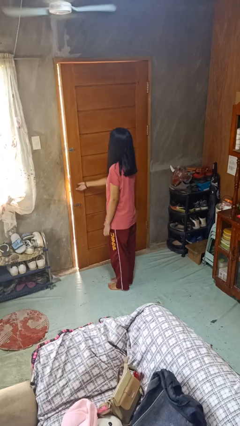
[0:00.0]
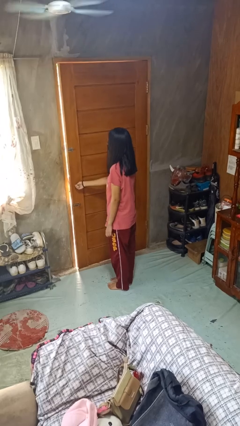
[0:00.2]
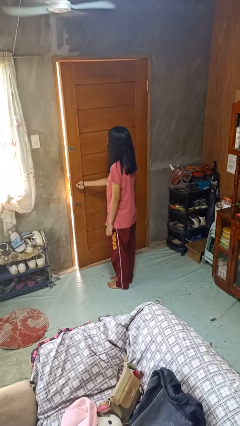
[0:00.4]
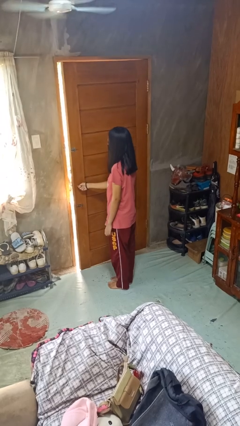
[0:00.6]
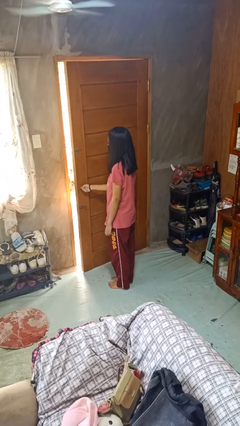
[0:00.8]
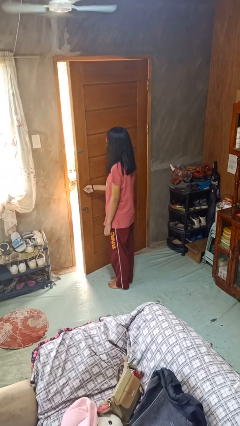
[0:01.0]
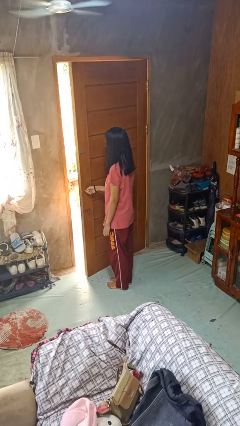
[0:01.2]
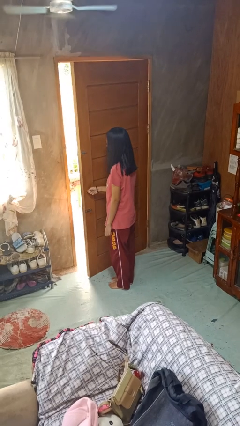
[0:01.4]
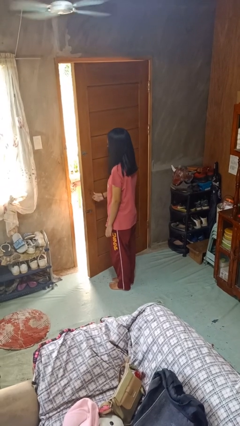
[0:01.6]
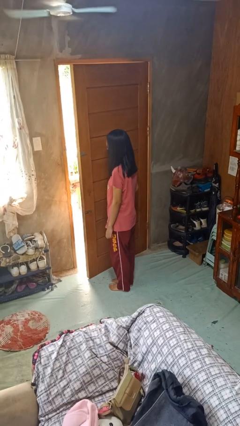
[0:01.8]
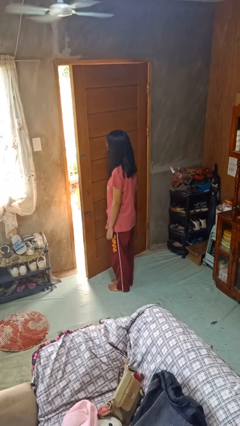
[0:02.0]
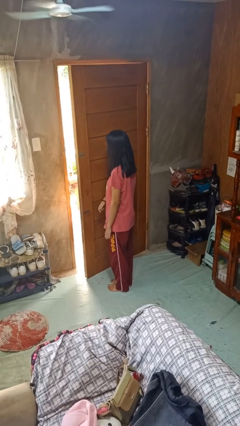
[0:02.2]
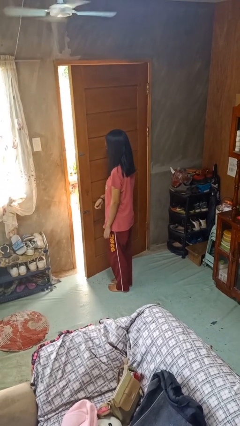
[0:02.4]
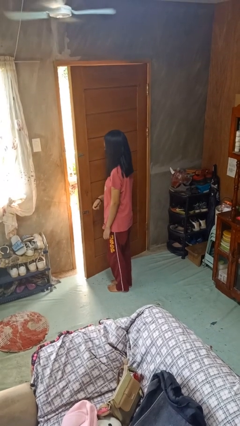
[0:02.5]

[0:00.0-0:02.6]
person opens facility door

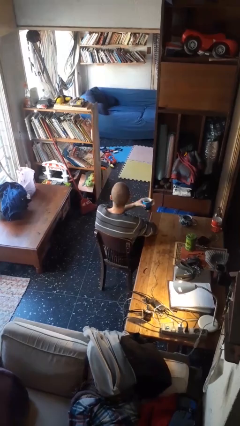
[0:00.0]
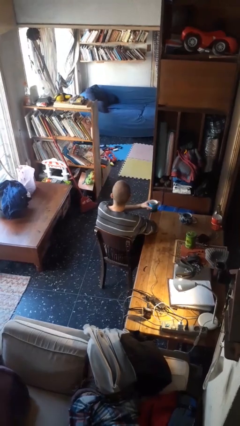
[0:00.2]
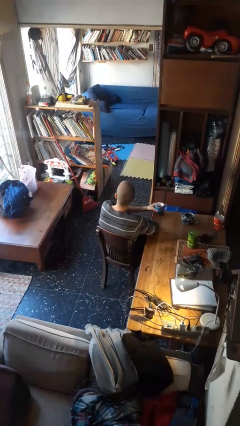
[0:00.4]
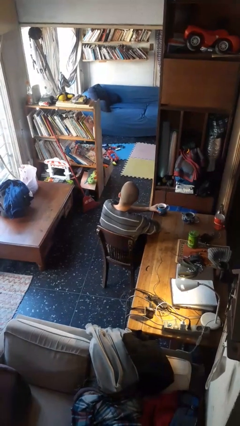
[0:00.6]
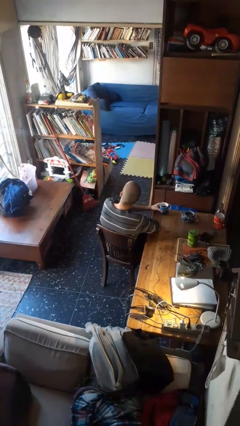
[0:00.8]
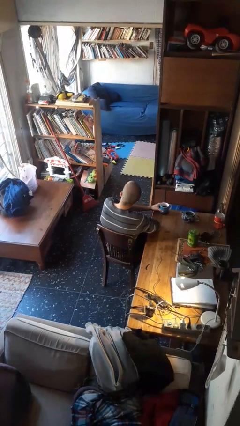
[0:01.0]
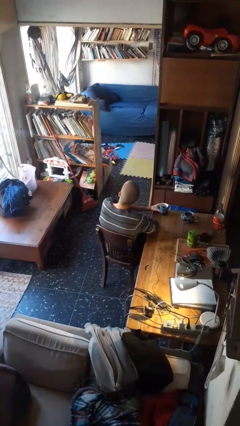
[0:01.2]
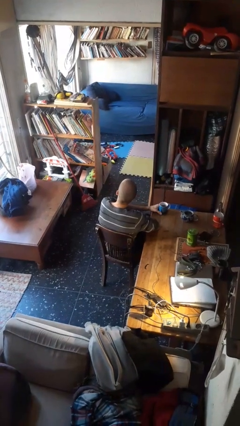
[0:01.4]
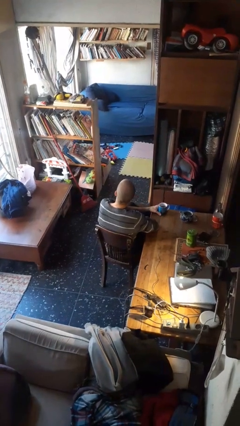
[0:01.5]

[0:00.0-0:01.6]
person puts down object on table

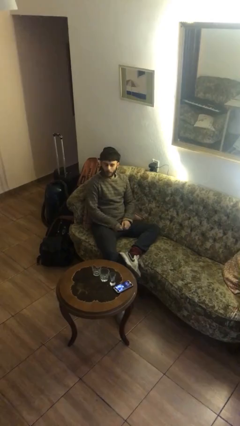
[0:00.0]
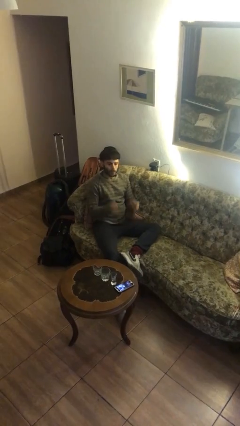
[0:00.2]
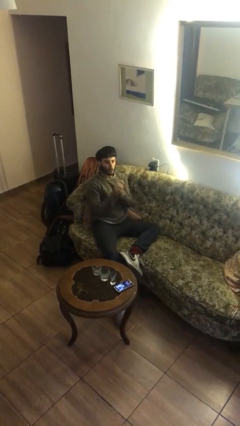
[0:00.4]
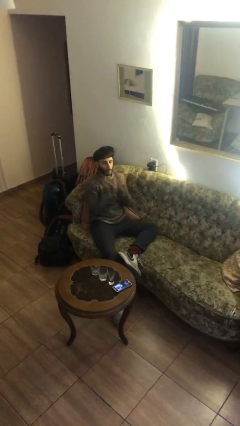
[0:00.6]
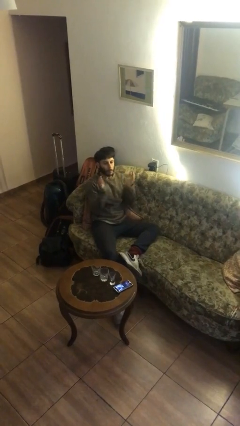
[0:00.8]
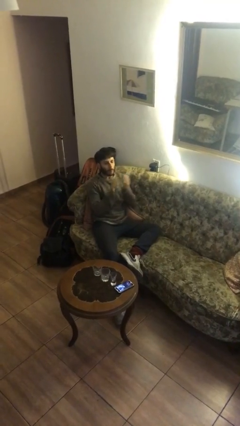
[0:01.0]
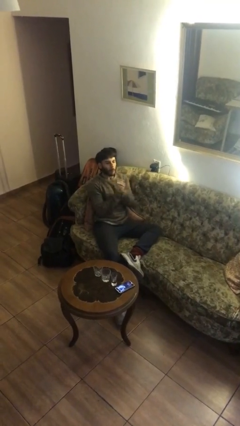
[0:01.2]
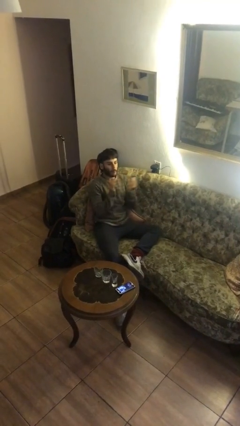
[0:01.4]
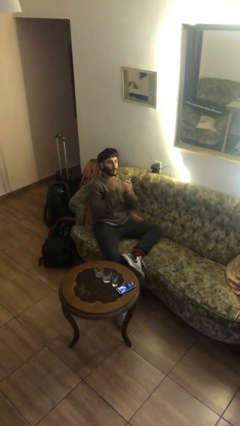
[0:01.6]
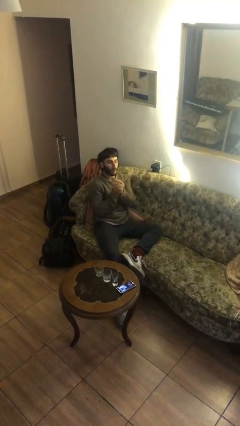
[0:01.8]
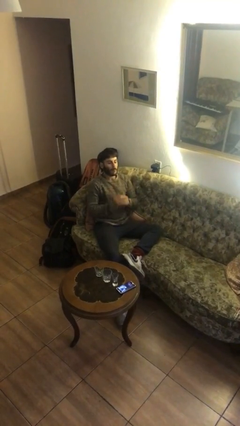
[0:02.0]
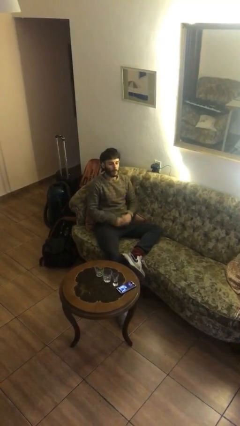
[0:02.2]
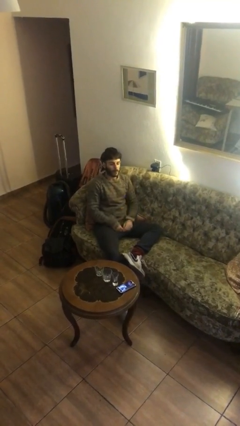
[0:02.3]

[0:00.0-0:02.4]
person claps hands

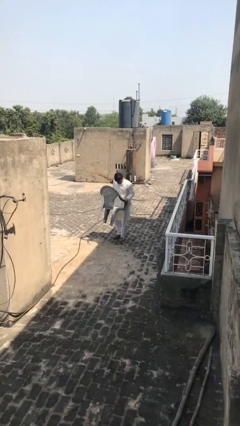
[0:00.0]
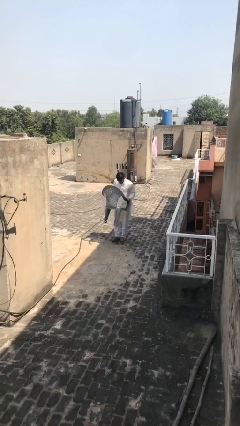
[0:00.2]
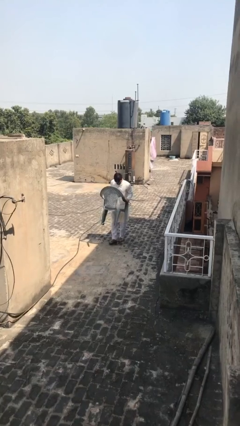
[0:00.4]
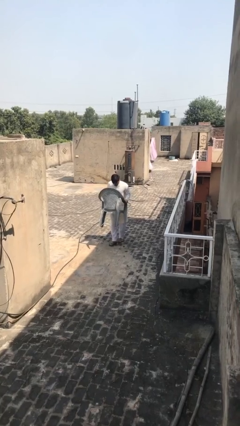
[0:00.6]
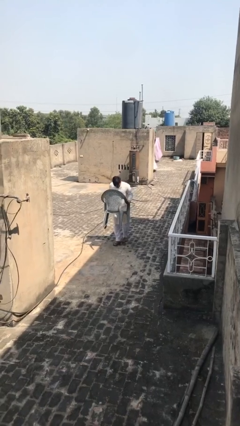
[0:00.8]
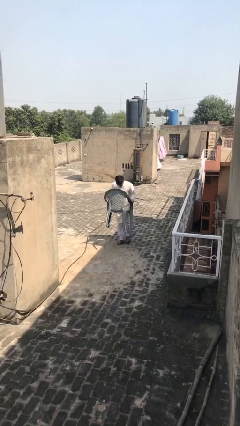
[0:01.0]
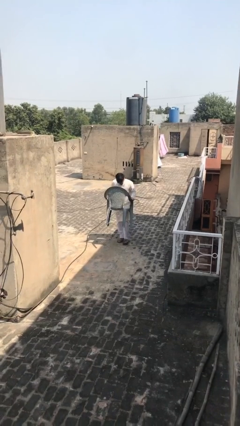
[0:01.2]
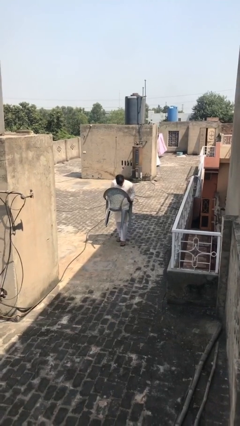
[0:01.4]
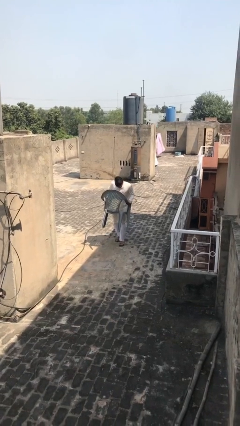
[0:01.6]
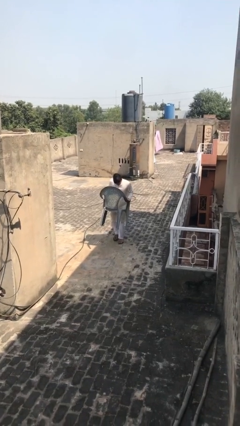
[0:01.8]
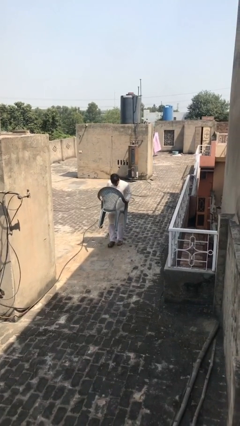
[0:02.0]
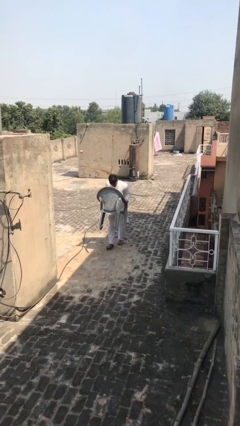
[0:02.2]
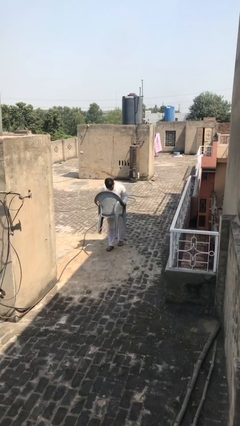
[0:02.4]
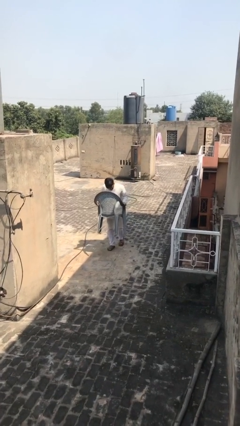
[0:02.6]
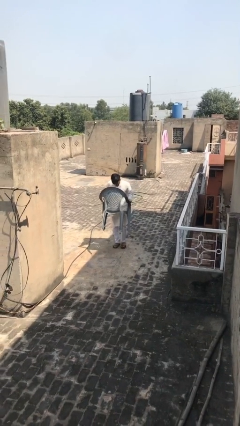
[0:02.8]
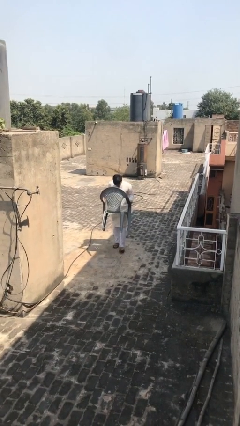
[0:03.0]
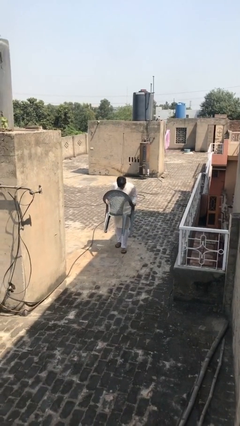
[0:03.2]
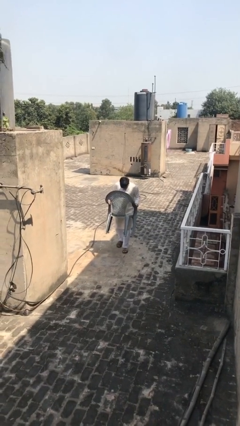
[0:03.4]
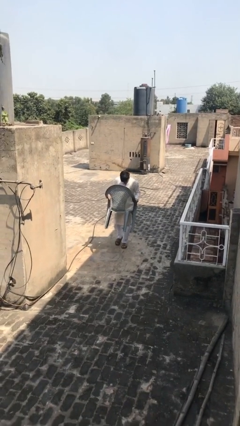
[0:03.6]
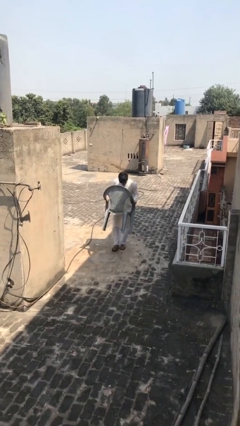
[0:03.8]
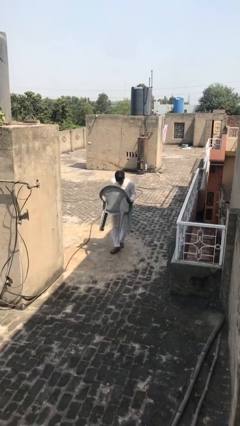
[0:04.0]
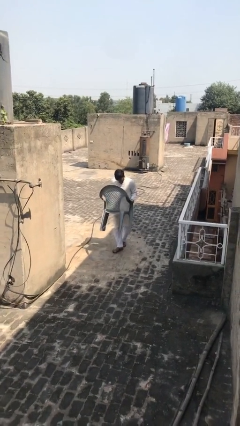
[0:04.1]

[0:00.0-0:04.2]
person carries heavy object

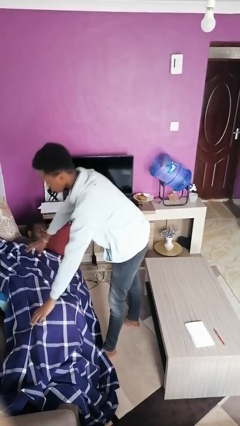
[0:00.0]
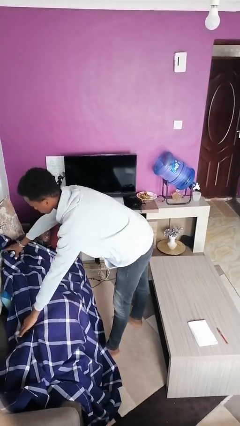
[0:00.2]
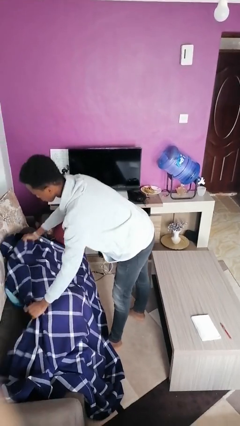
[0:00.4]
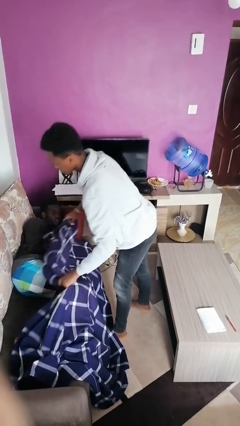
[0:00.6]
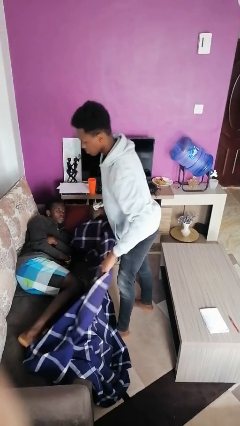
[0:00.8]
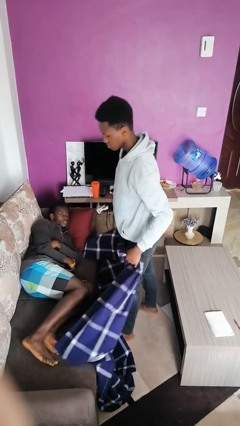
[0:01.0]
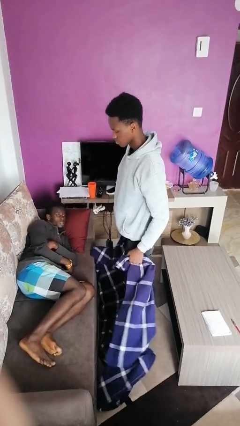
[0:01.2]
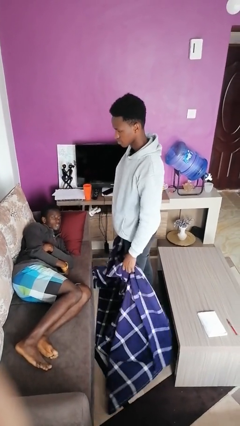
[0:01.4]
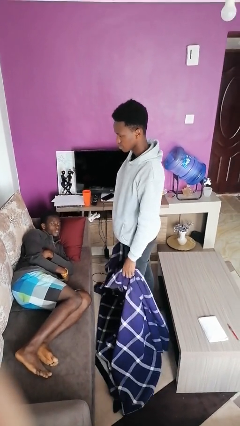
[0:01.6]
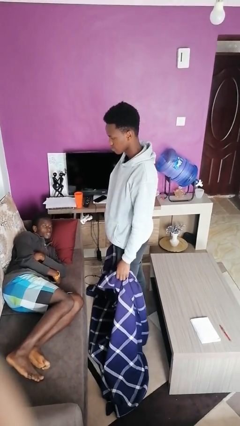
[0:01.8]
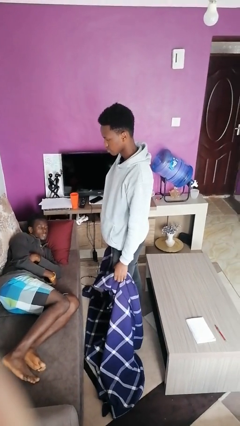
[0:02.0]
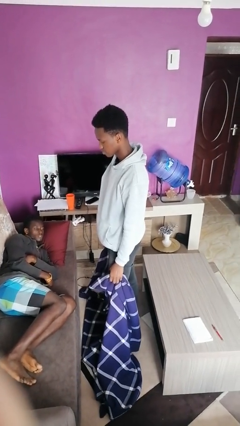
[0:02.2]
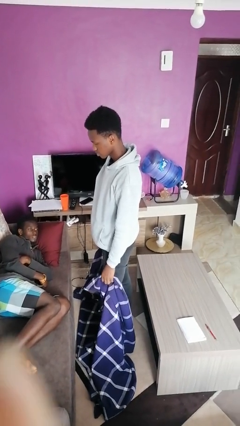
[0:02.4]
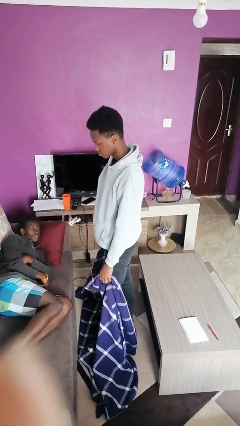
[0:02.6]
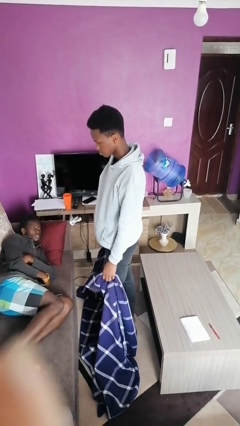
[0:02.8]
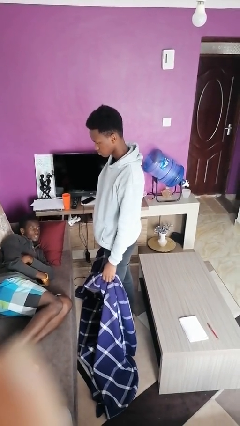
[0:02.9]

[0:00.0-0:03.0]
person uncovers friend with blanket

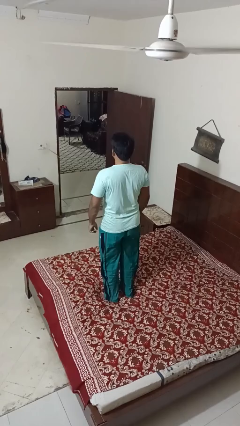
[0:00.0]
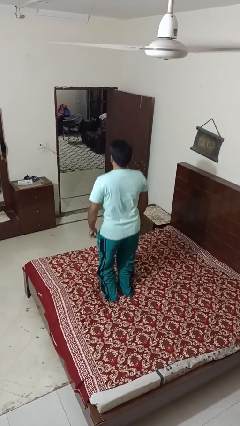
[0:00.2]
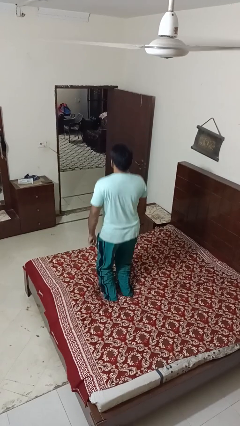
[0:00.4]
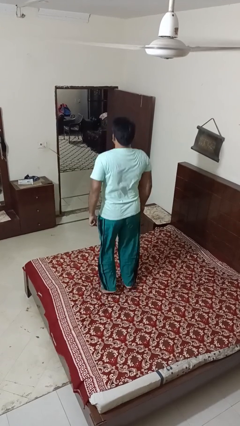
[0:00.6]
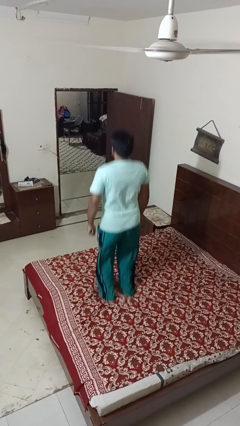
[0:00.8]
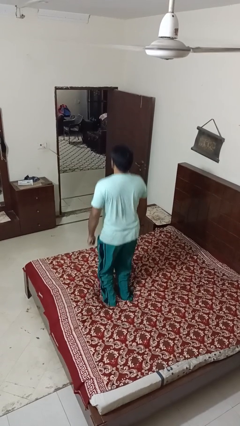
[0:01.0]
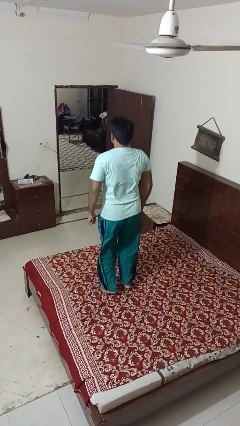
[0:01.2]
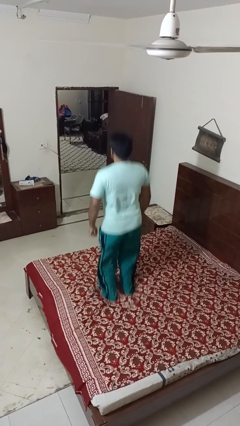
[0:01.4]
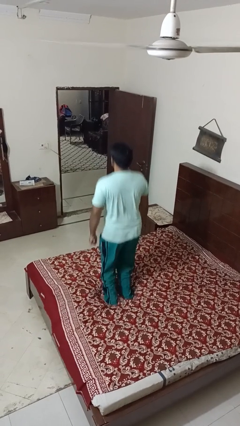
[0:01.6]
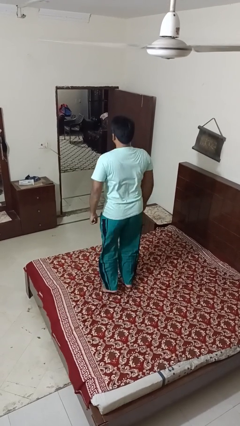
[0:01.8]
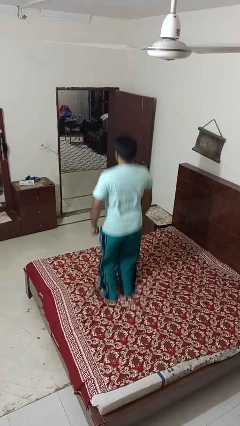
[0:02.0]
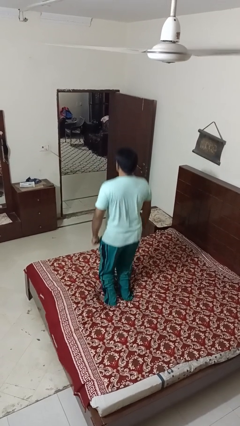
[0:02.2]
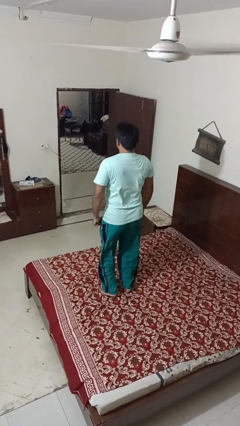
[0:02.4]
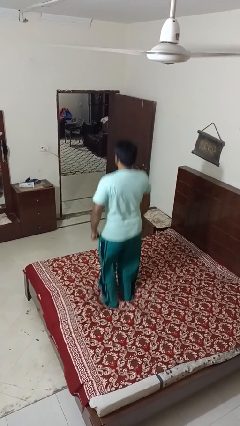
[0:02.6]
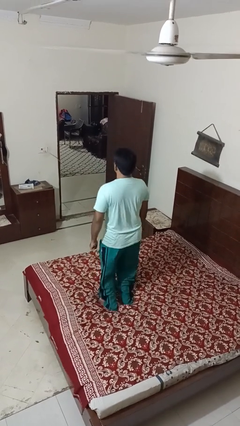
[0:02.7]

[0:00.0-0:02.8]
person jumps on bed

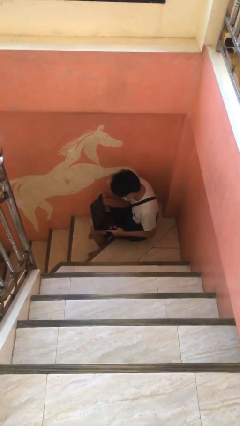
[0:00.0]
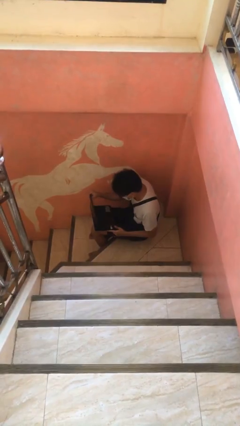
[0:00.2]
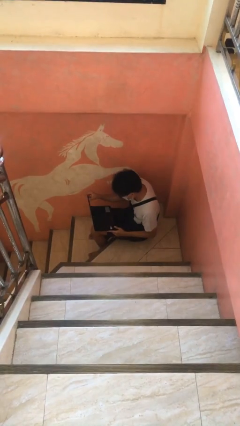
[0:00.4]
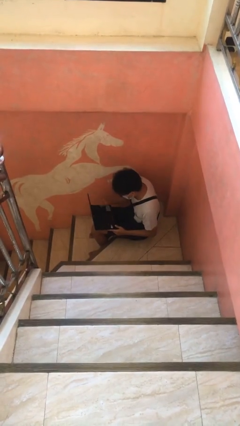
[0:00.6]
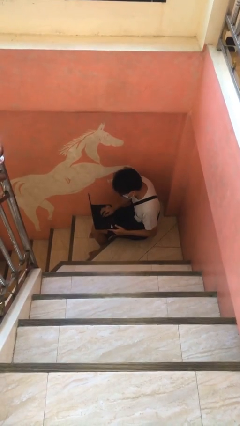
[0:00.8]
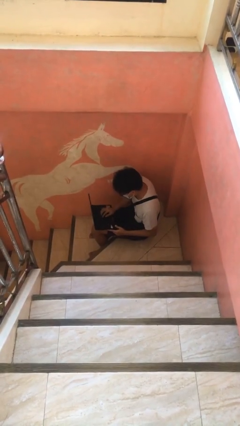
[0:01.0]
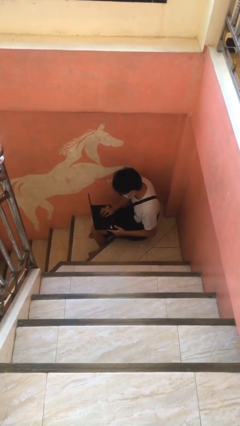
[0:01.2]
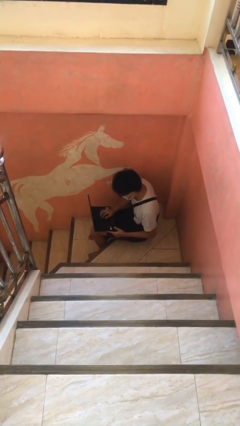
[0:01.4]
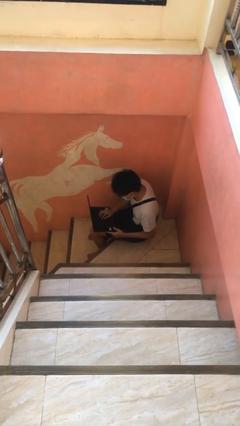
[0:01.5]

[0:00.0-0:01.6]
person interacts with laptop
